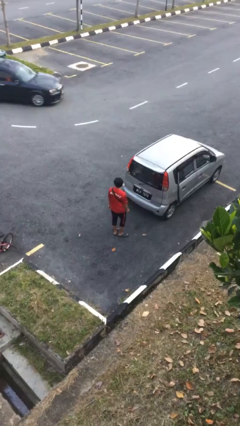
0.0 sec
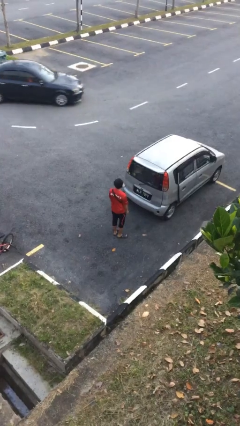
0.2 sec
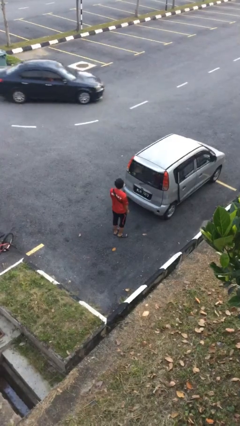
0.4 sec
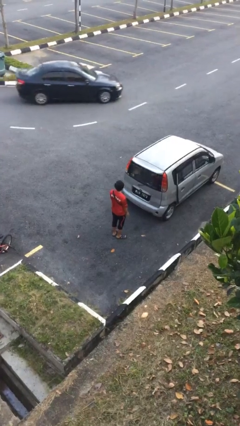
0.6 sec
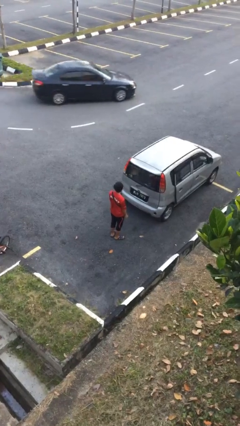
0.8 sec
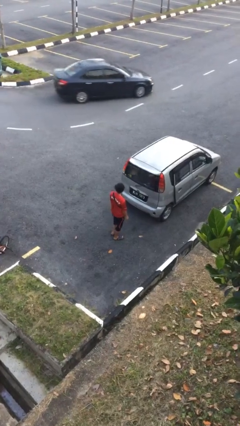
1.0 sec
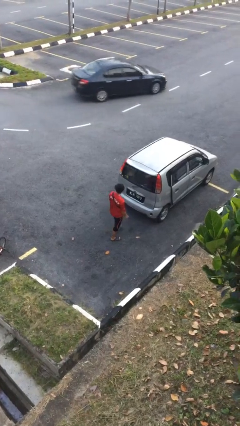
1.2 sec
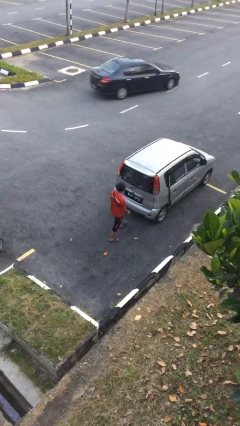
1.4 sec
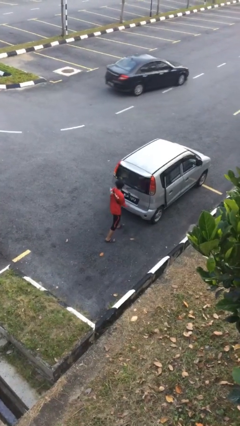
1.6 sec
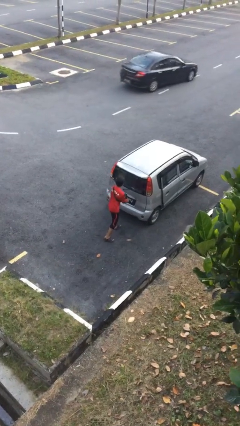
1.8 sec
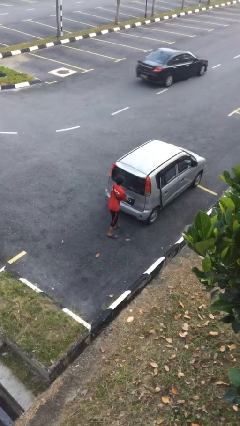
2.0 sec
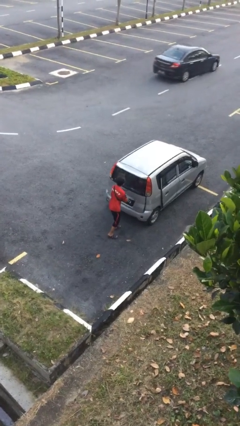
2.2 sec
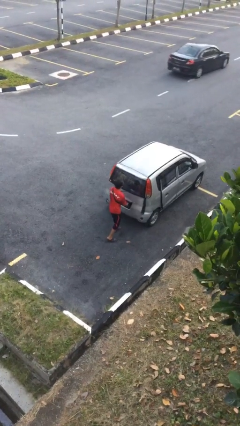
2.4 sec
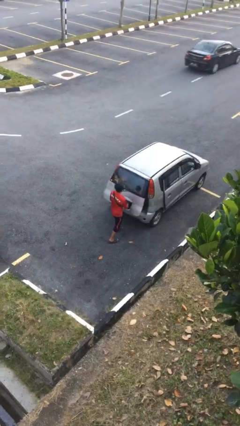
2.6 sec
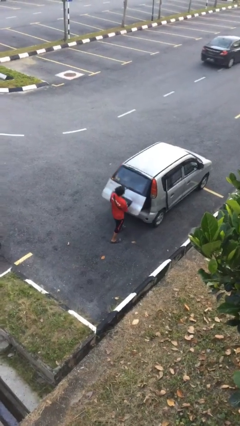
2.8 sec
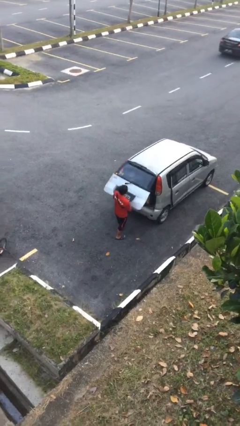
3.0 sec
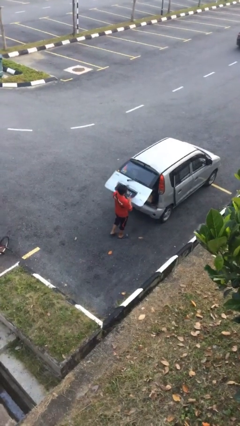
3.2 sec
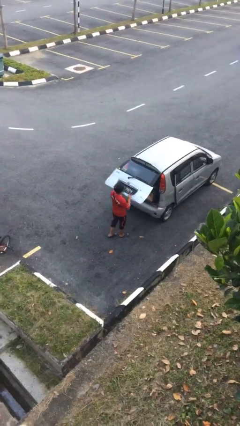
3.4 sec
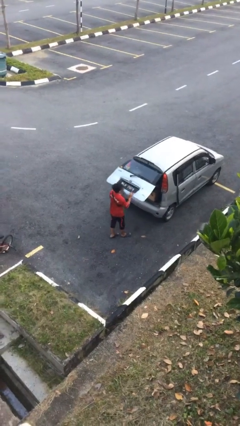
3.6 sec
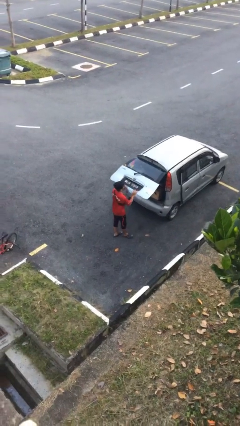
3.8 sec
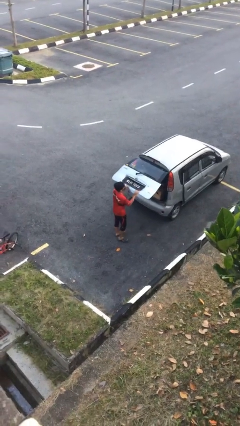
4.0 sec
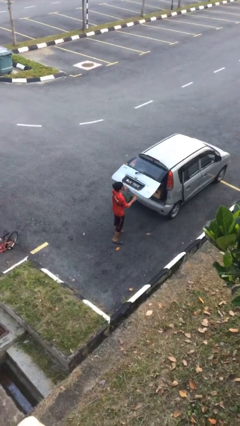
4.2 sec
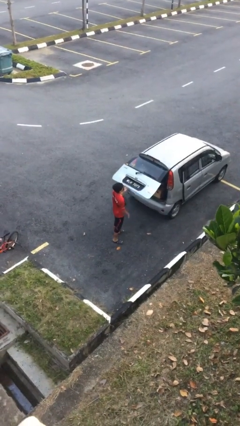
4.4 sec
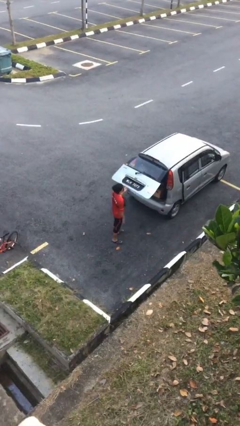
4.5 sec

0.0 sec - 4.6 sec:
person opens car trunk

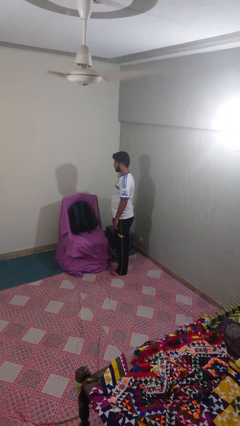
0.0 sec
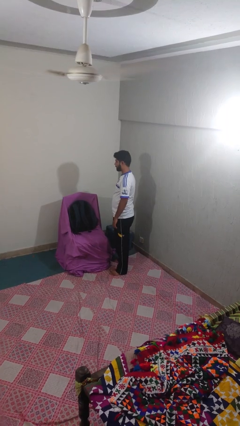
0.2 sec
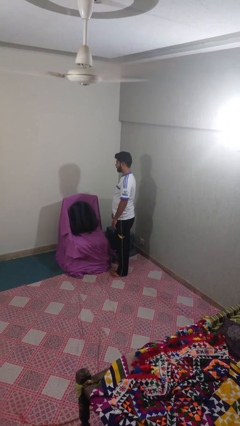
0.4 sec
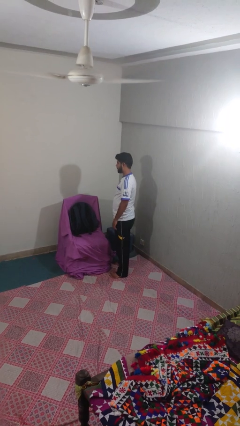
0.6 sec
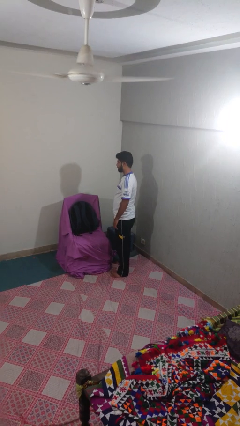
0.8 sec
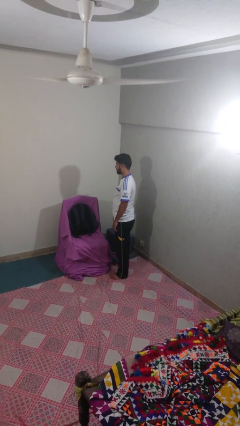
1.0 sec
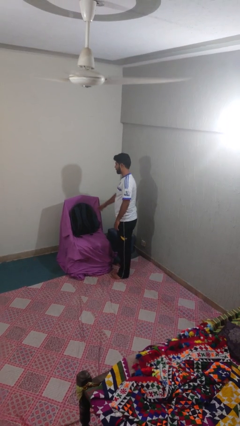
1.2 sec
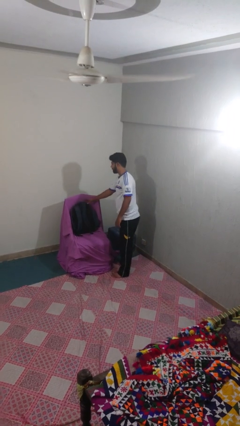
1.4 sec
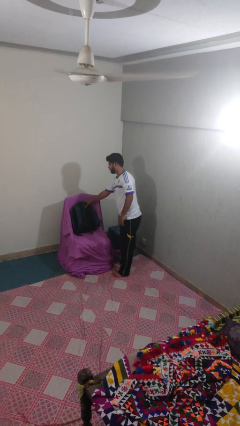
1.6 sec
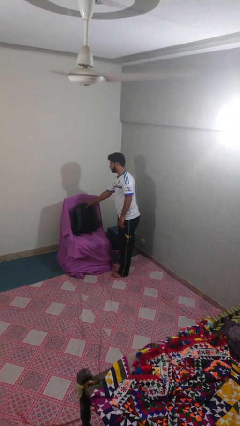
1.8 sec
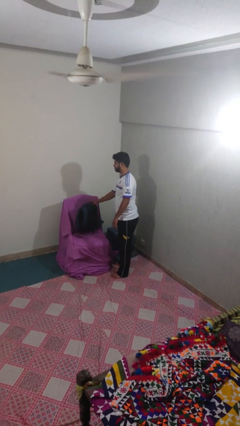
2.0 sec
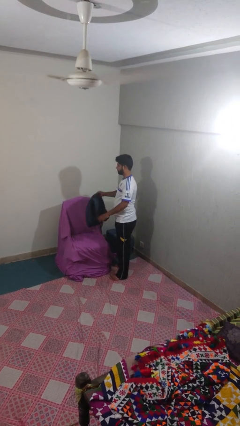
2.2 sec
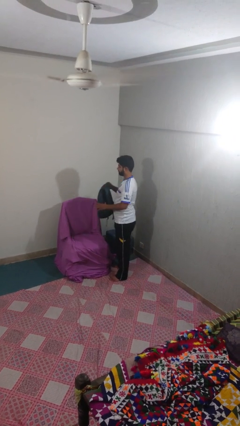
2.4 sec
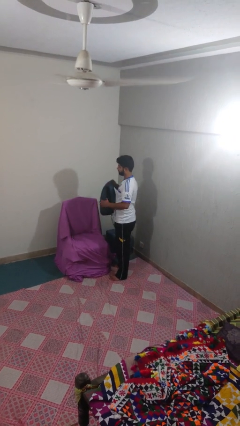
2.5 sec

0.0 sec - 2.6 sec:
person picks up object from couch

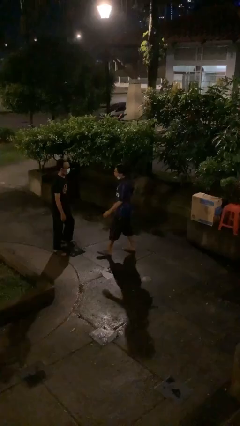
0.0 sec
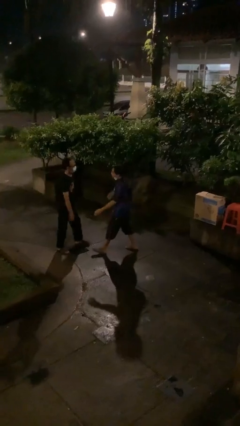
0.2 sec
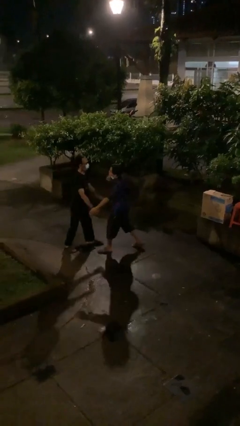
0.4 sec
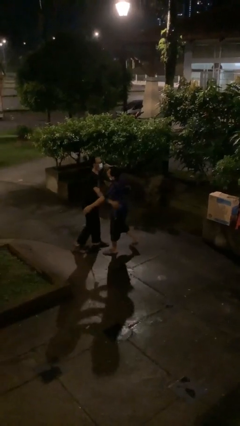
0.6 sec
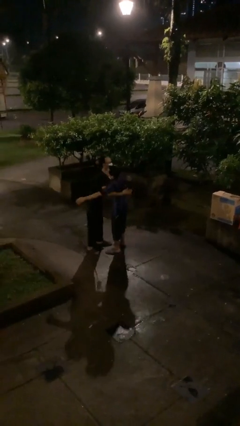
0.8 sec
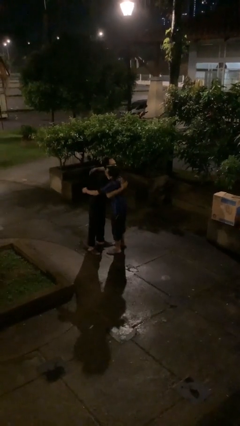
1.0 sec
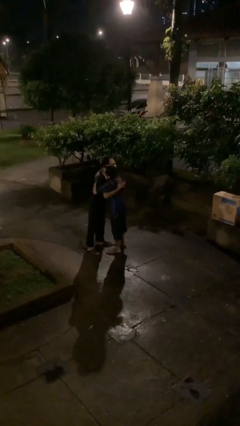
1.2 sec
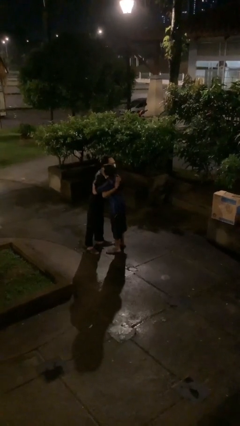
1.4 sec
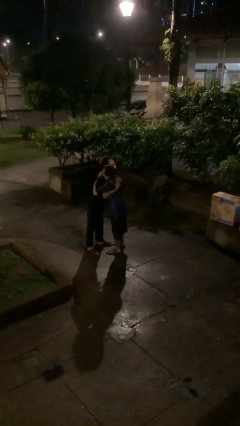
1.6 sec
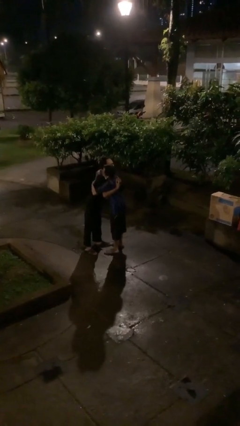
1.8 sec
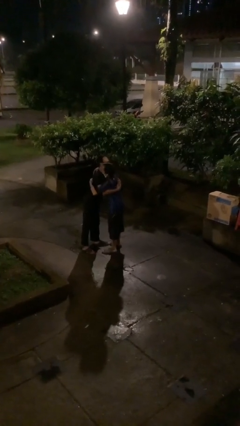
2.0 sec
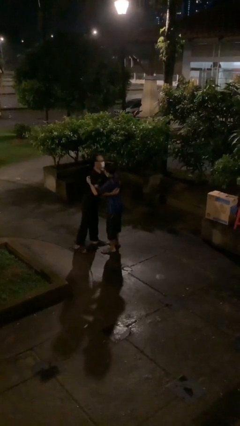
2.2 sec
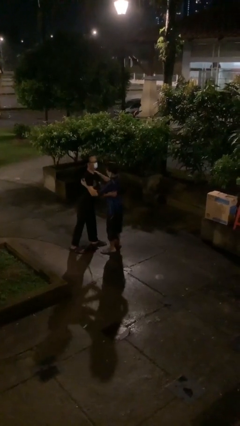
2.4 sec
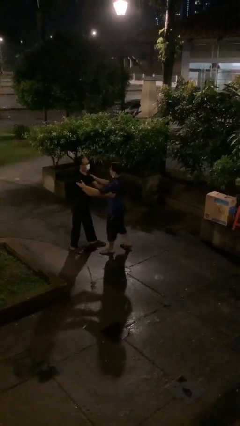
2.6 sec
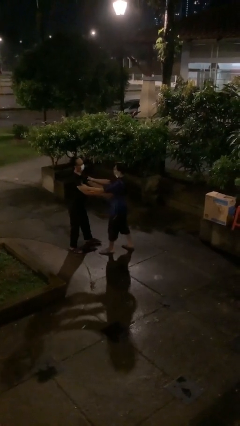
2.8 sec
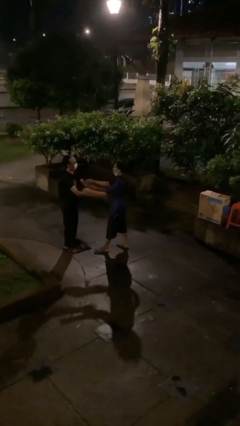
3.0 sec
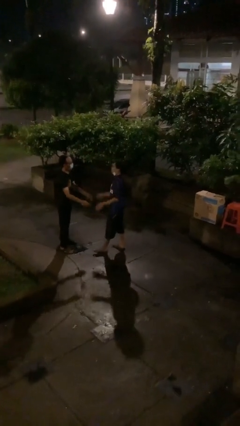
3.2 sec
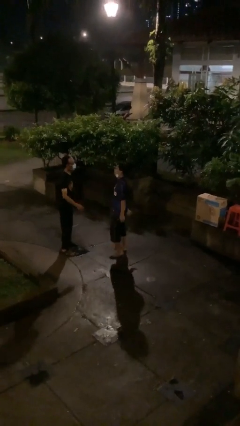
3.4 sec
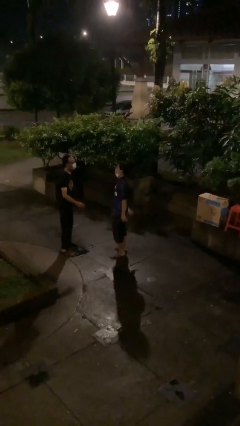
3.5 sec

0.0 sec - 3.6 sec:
person embraces person

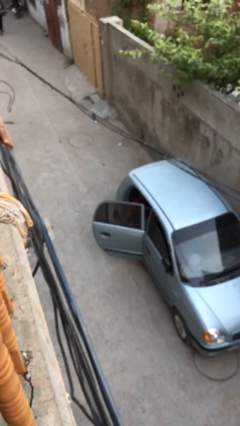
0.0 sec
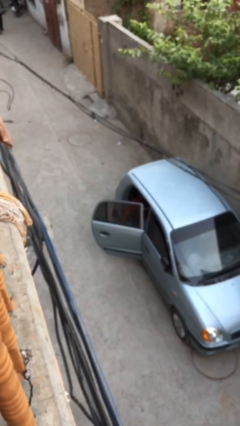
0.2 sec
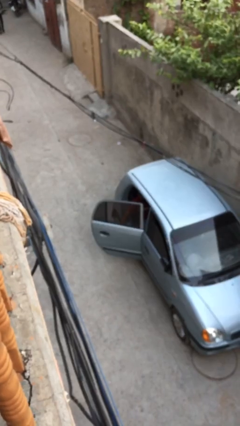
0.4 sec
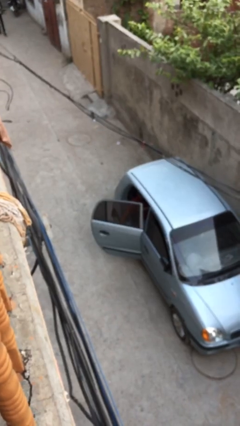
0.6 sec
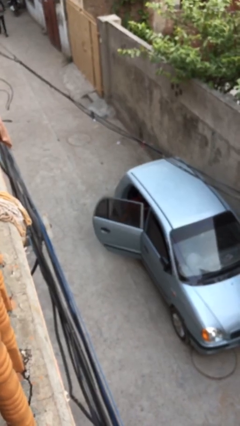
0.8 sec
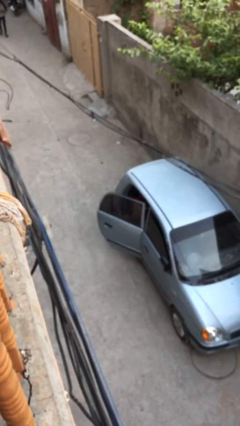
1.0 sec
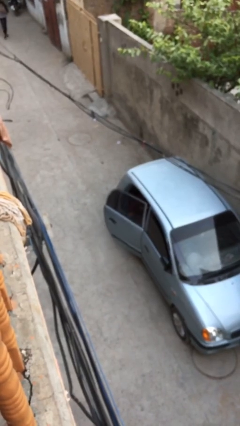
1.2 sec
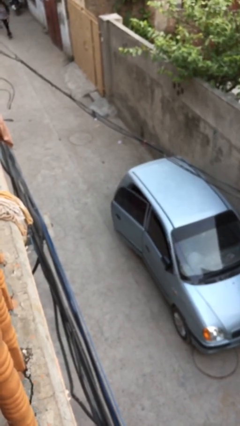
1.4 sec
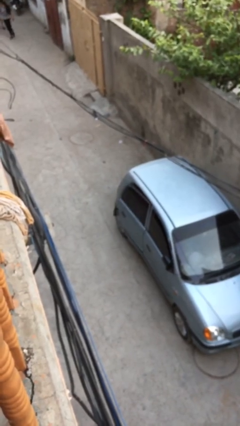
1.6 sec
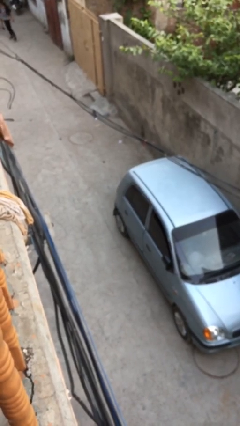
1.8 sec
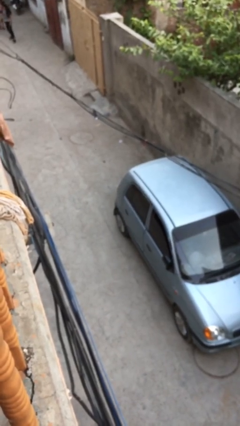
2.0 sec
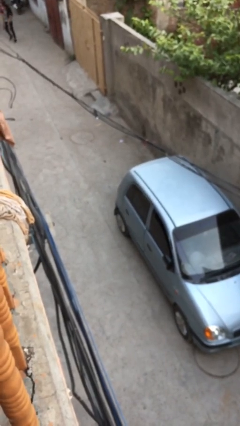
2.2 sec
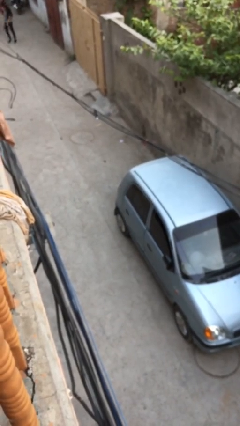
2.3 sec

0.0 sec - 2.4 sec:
person closes car door

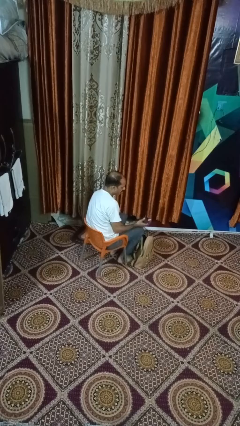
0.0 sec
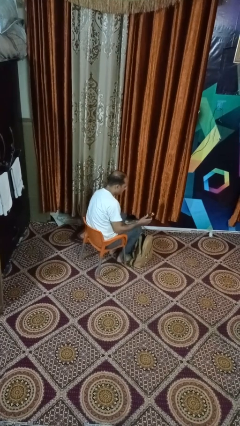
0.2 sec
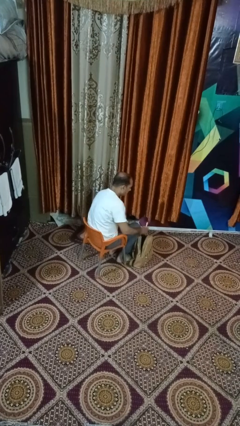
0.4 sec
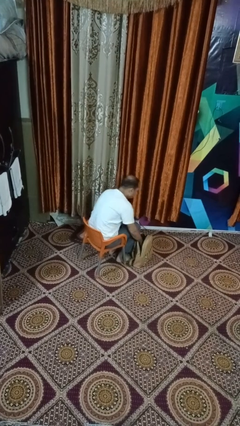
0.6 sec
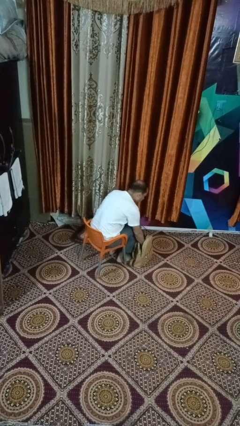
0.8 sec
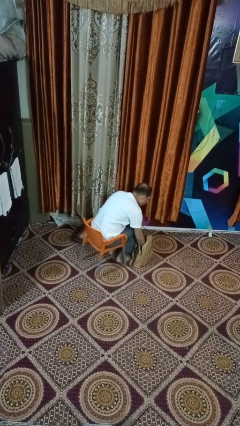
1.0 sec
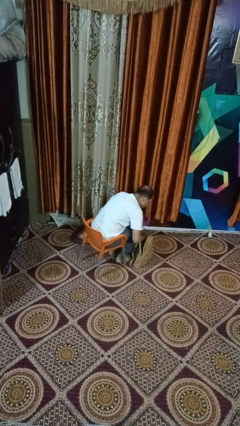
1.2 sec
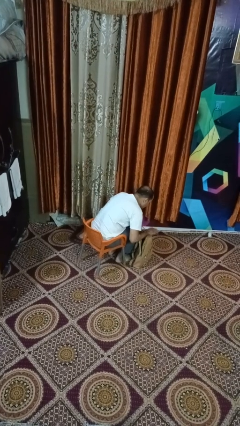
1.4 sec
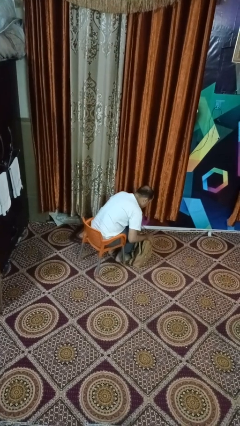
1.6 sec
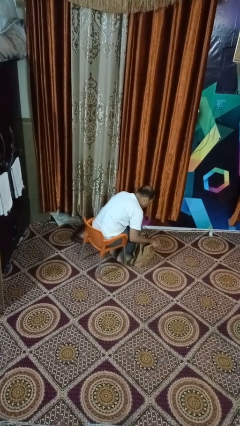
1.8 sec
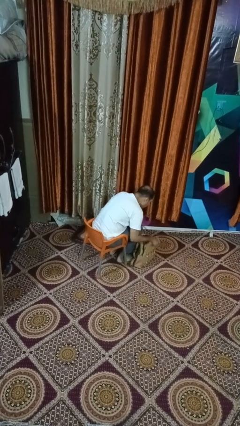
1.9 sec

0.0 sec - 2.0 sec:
person puts object into purse

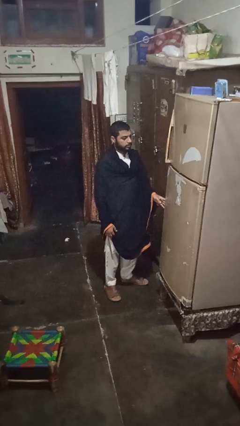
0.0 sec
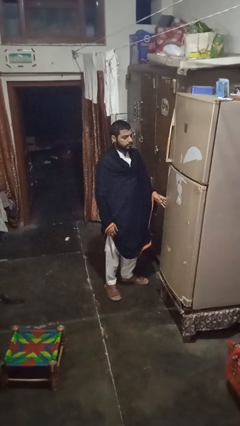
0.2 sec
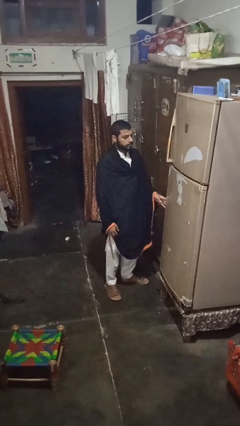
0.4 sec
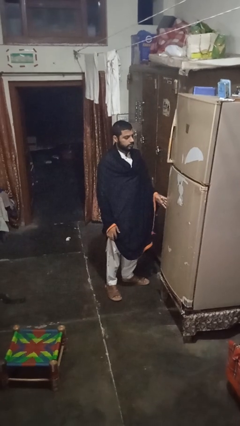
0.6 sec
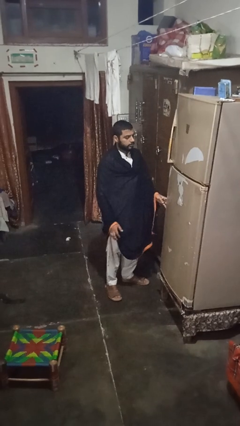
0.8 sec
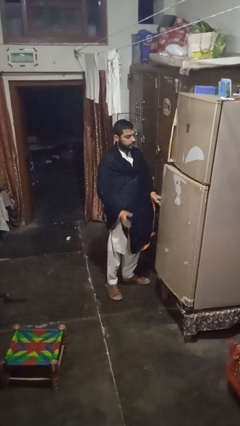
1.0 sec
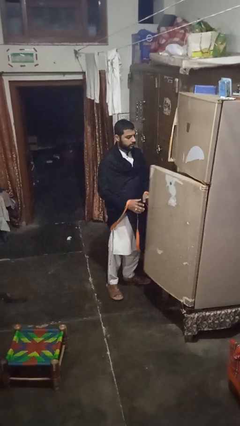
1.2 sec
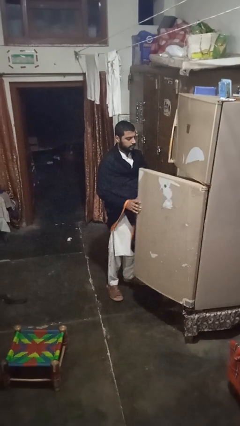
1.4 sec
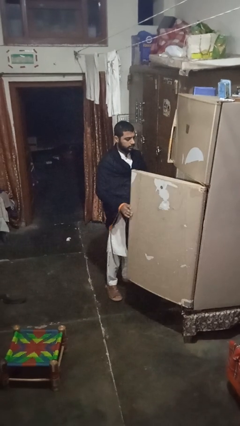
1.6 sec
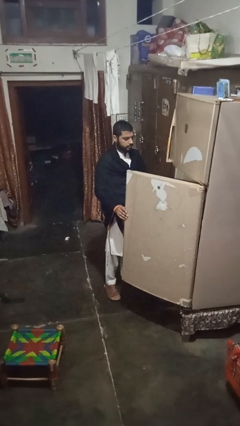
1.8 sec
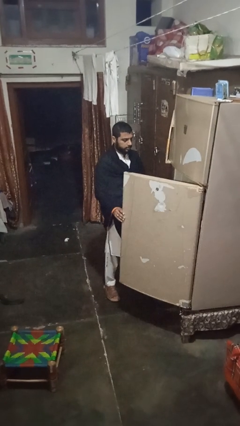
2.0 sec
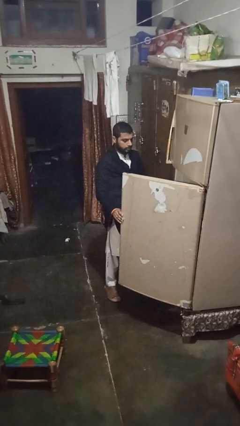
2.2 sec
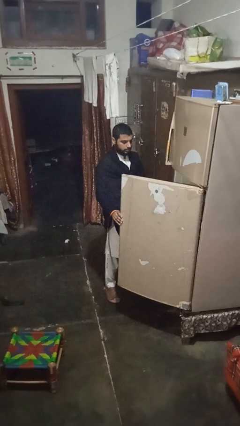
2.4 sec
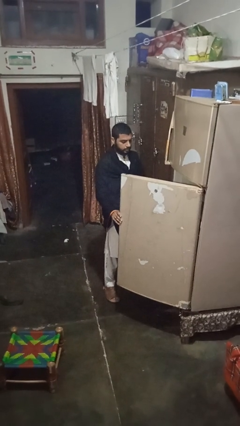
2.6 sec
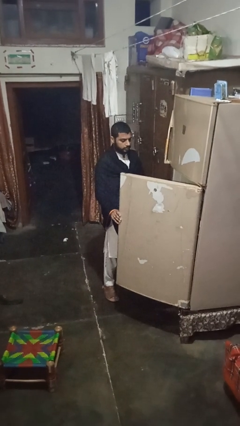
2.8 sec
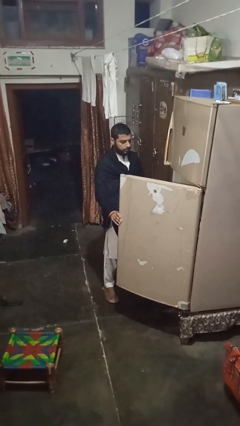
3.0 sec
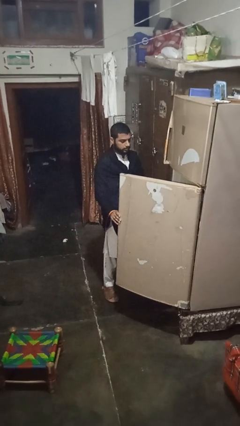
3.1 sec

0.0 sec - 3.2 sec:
person opens refrigerator
